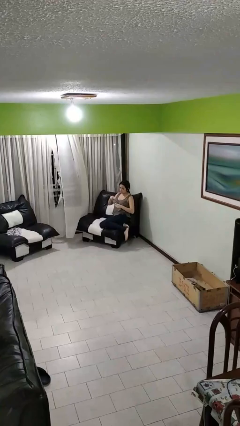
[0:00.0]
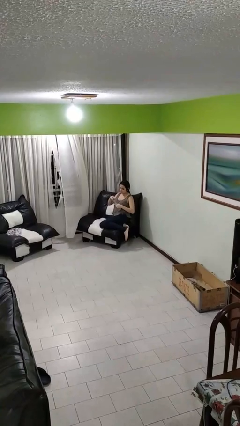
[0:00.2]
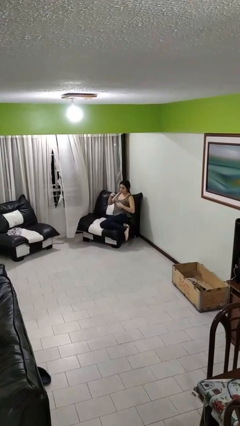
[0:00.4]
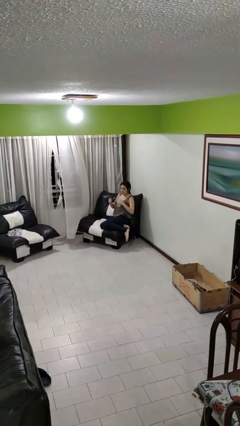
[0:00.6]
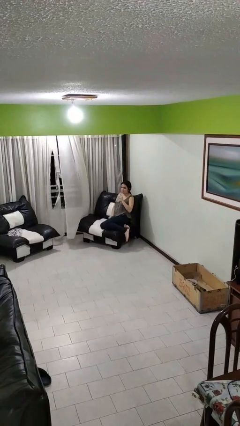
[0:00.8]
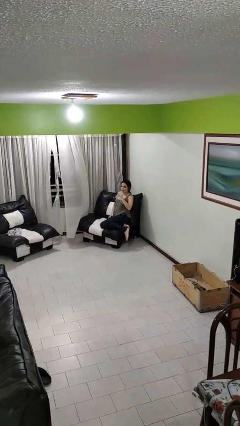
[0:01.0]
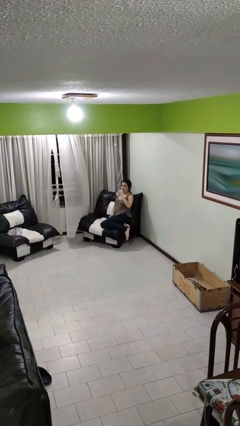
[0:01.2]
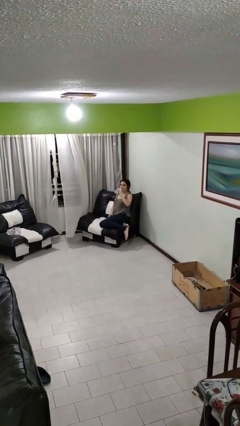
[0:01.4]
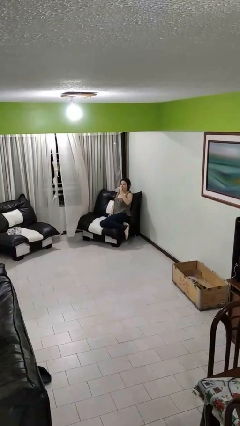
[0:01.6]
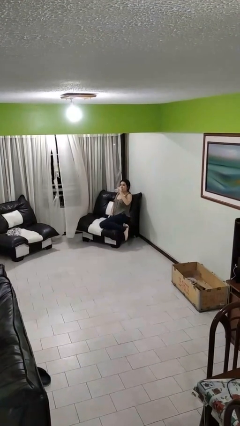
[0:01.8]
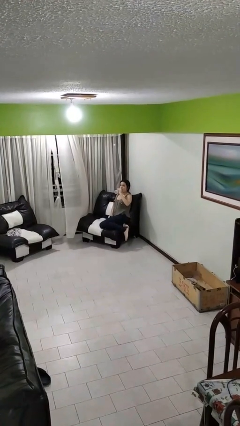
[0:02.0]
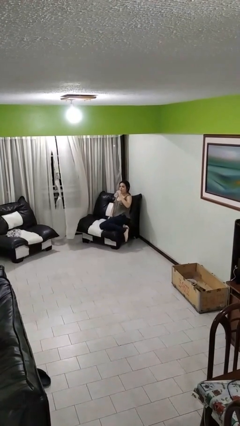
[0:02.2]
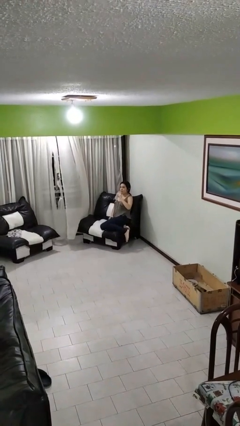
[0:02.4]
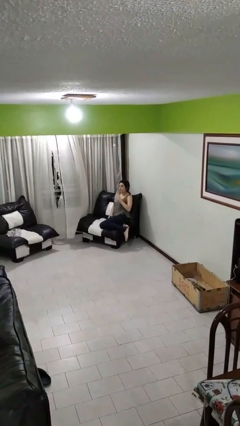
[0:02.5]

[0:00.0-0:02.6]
person drinks from bottle

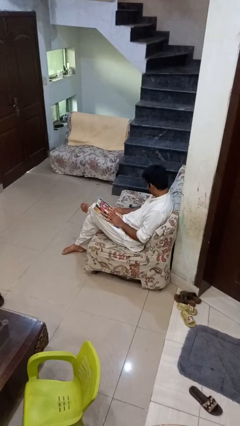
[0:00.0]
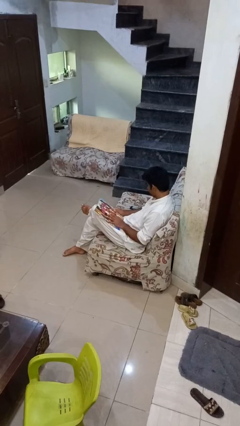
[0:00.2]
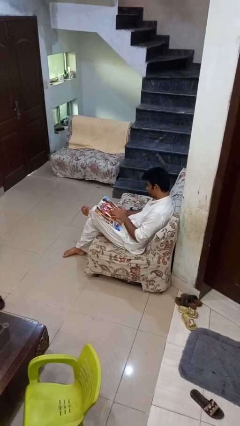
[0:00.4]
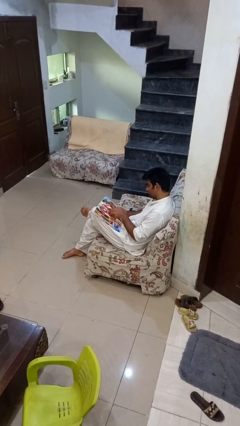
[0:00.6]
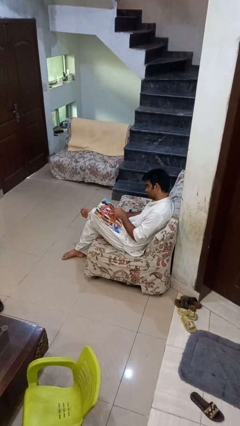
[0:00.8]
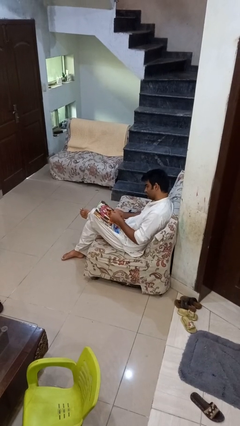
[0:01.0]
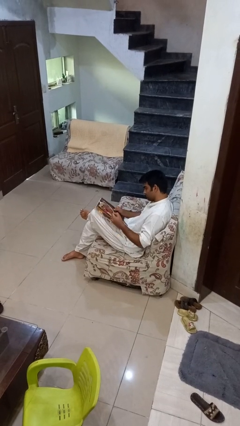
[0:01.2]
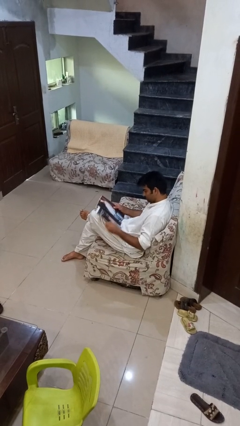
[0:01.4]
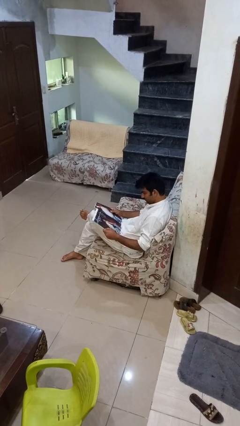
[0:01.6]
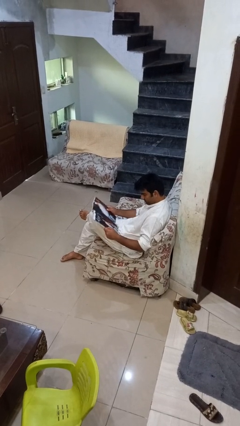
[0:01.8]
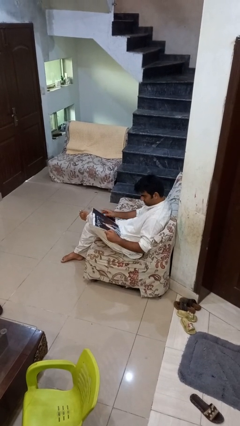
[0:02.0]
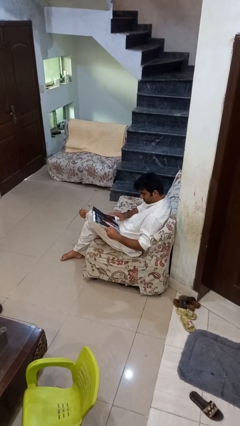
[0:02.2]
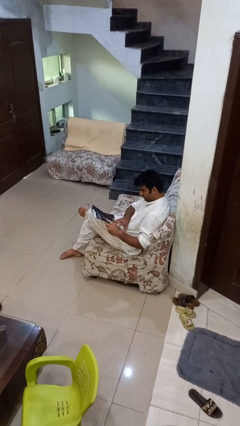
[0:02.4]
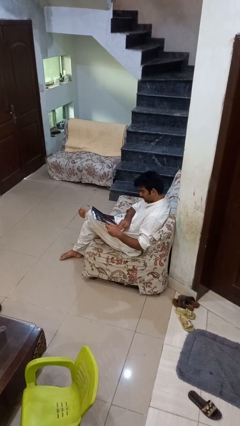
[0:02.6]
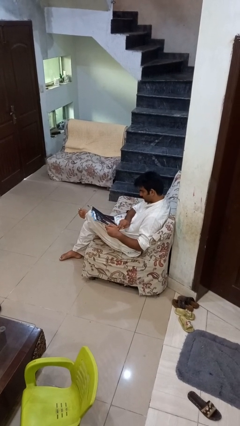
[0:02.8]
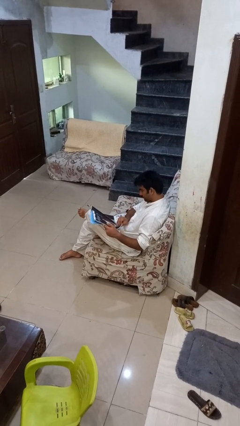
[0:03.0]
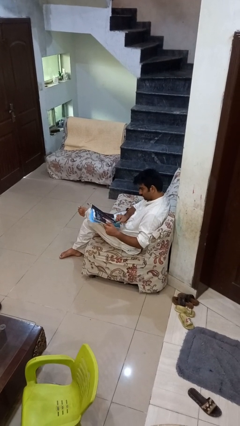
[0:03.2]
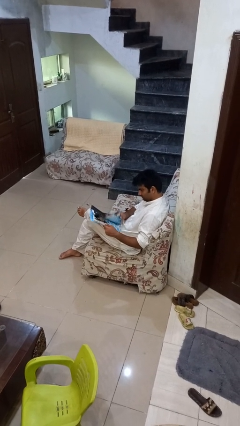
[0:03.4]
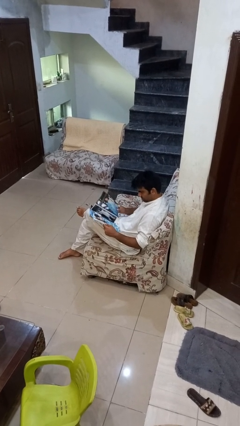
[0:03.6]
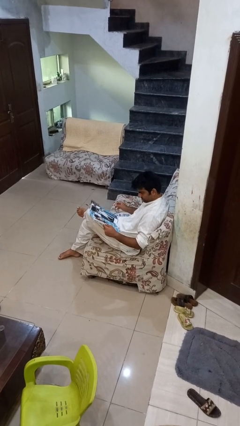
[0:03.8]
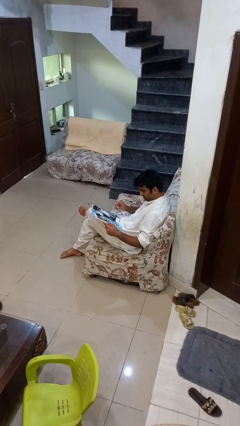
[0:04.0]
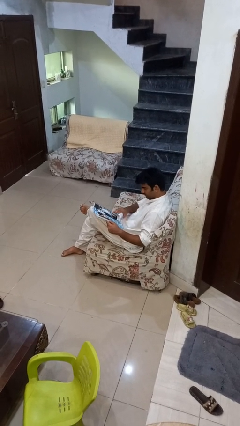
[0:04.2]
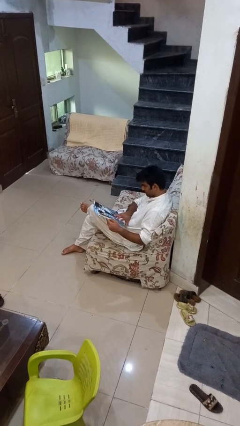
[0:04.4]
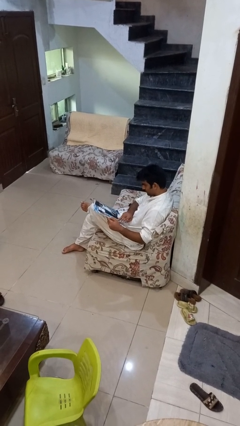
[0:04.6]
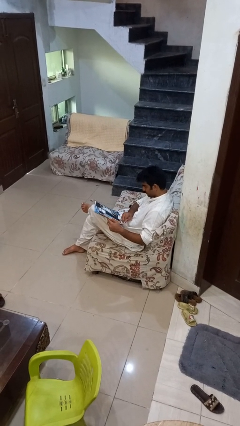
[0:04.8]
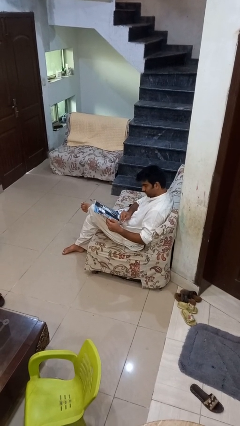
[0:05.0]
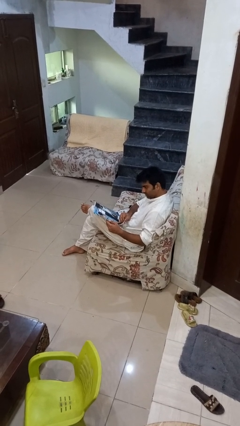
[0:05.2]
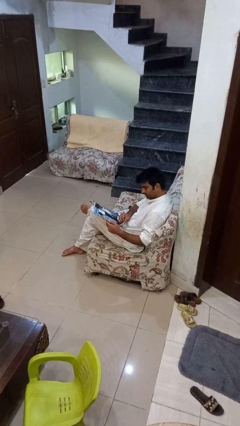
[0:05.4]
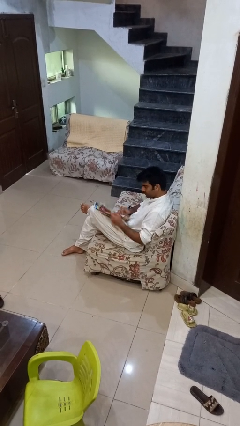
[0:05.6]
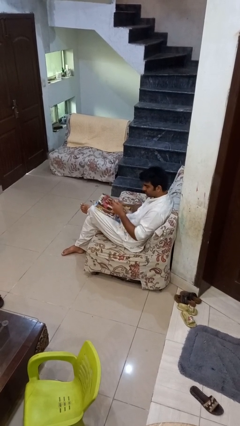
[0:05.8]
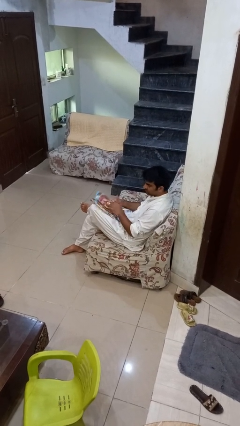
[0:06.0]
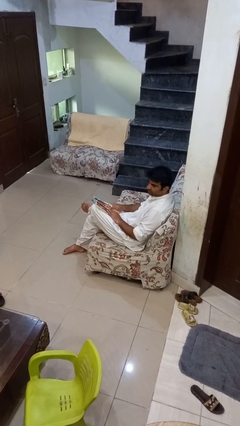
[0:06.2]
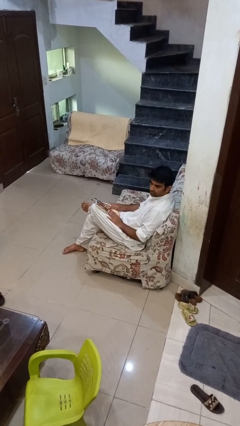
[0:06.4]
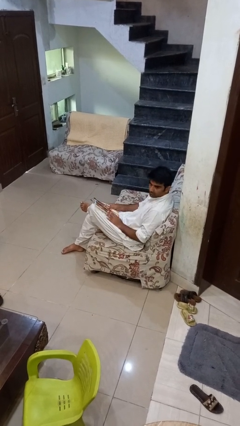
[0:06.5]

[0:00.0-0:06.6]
person reads magazine

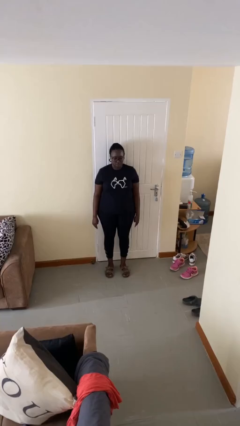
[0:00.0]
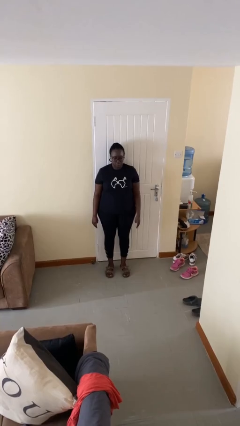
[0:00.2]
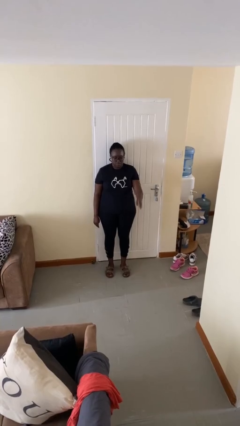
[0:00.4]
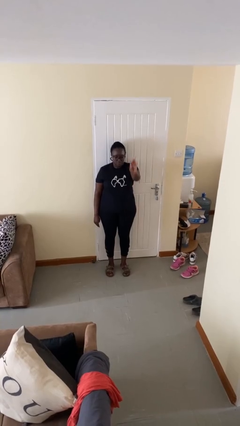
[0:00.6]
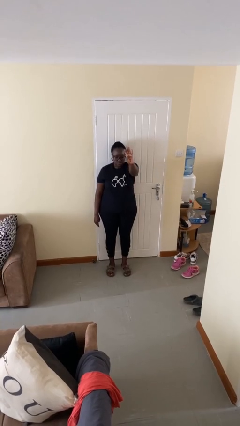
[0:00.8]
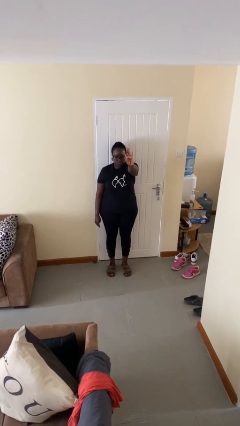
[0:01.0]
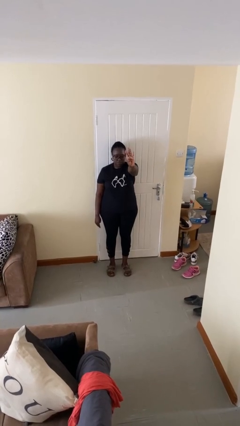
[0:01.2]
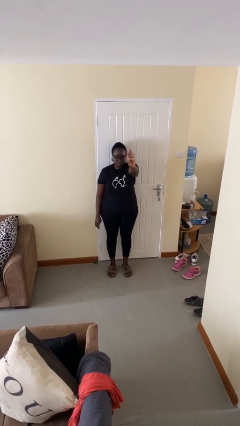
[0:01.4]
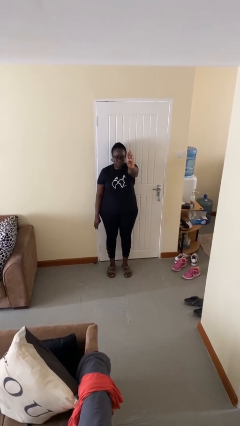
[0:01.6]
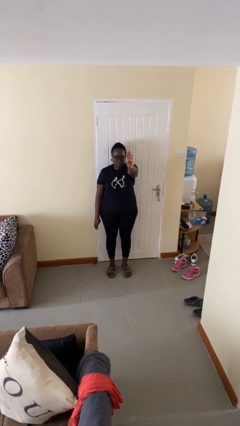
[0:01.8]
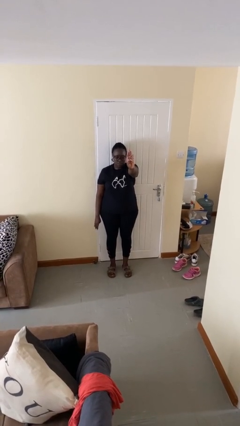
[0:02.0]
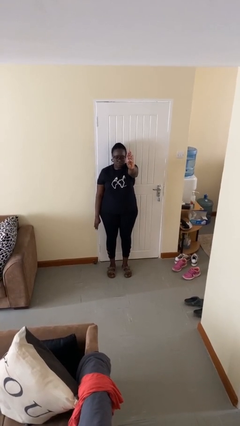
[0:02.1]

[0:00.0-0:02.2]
person gestures number four

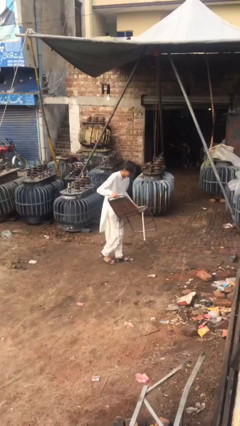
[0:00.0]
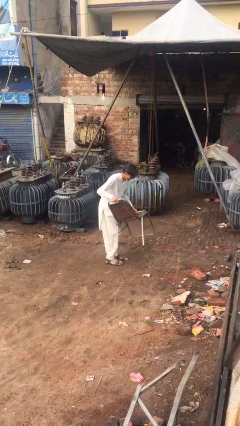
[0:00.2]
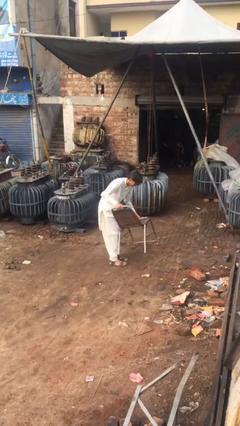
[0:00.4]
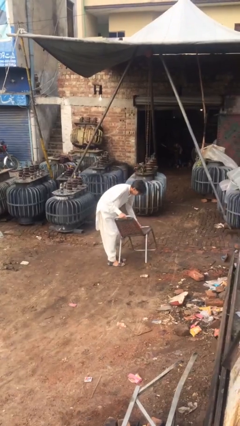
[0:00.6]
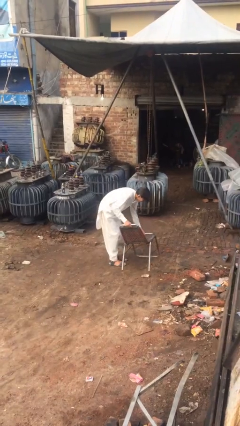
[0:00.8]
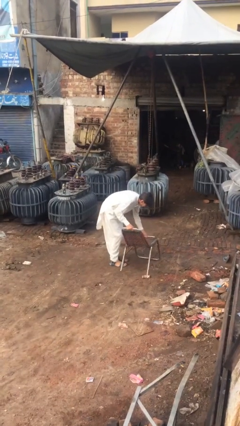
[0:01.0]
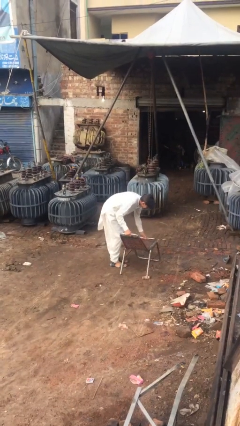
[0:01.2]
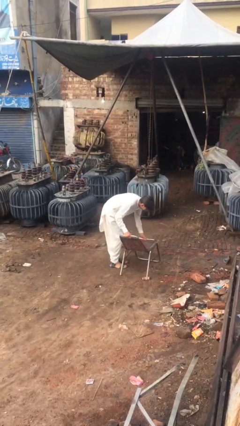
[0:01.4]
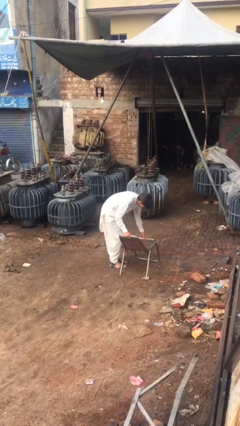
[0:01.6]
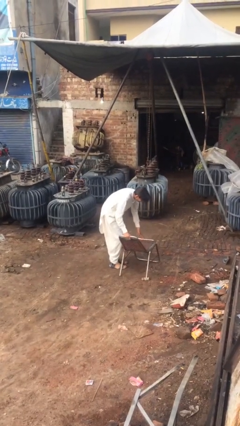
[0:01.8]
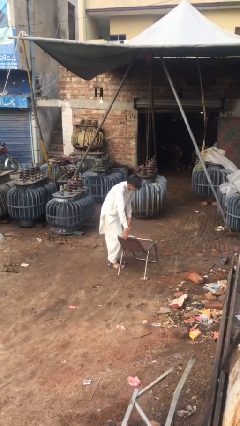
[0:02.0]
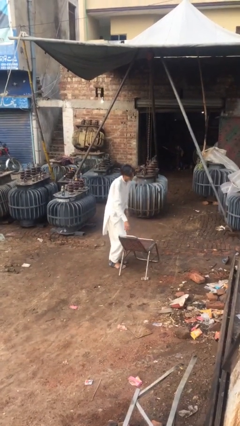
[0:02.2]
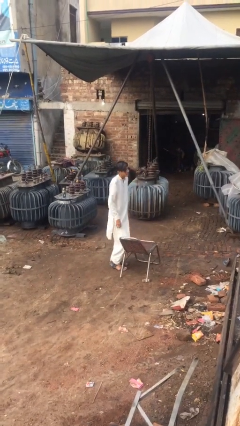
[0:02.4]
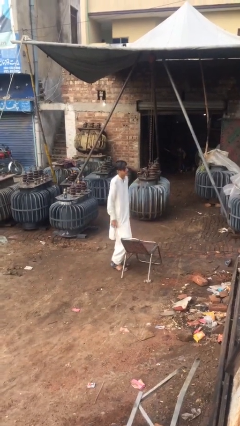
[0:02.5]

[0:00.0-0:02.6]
person puts down object on floor

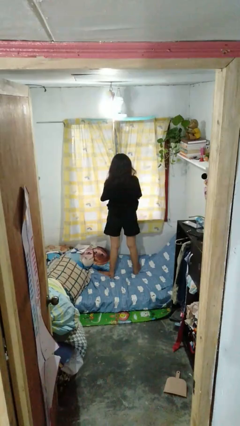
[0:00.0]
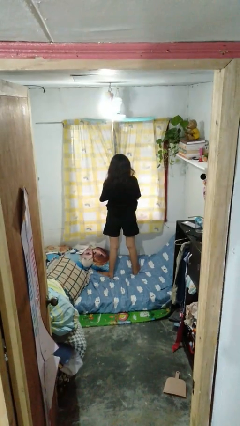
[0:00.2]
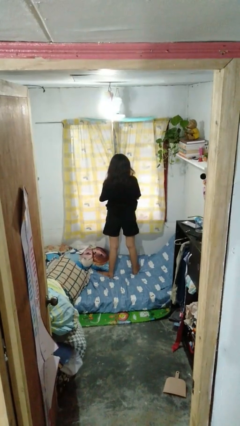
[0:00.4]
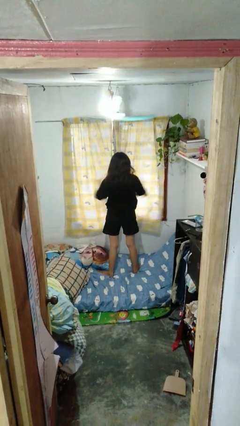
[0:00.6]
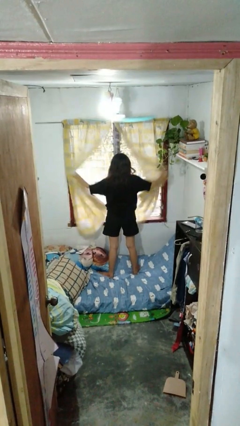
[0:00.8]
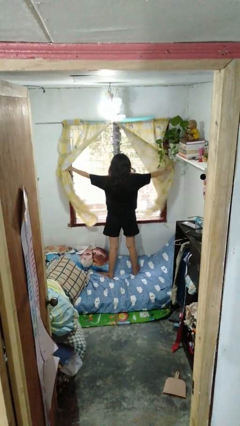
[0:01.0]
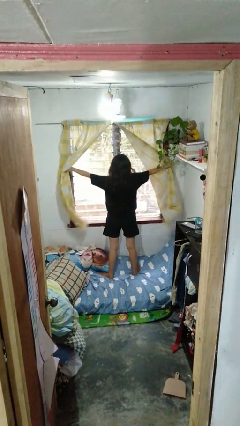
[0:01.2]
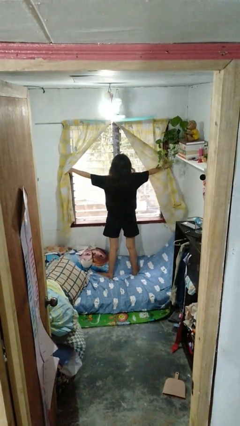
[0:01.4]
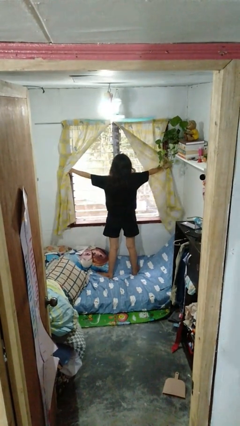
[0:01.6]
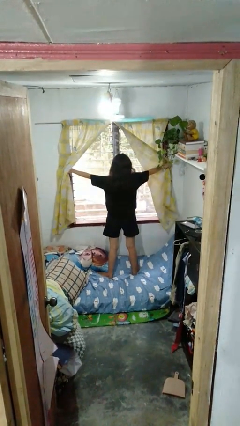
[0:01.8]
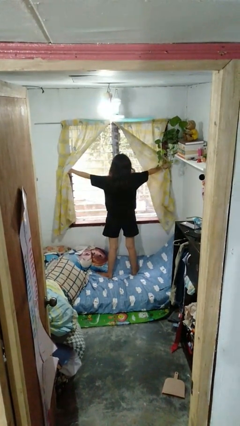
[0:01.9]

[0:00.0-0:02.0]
person opens curtains

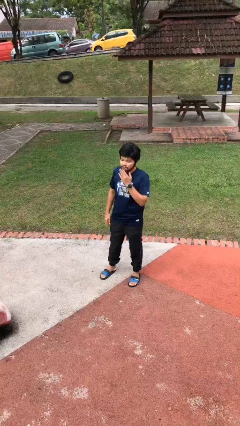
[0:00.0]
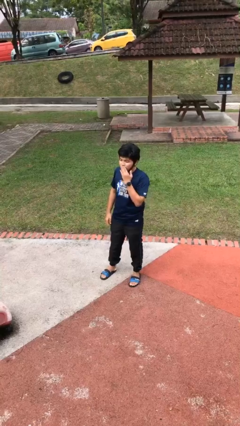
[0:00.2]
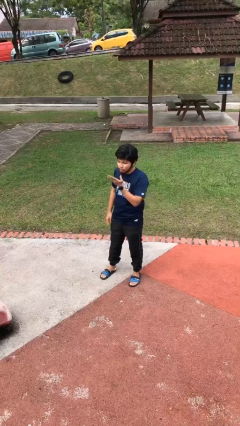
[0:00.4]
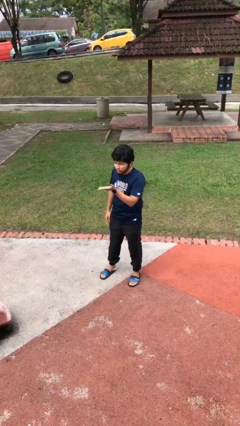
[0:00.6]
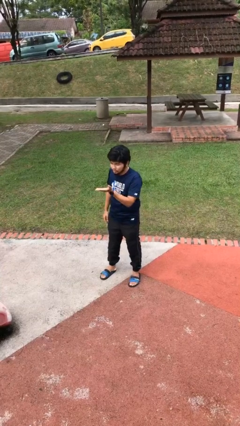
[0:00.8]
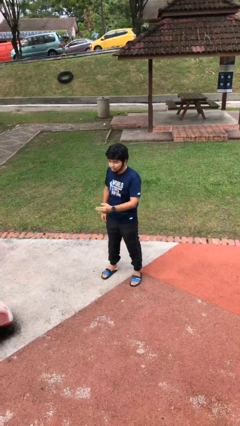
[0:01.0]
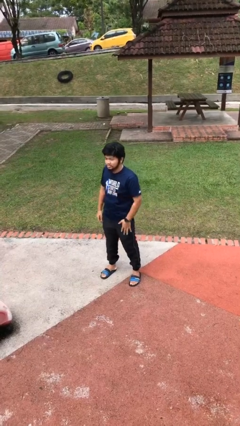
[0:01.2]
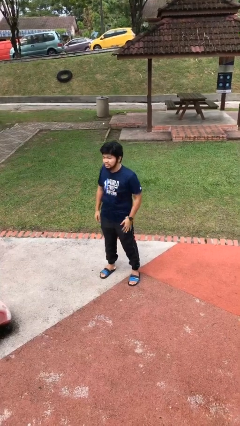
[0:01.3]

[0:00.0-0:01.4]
person gestures blow kiss
